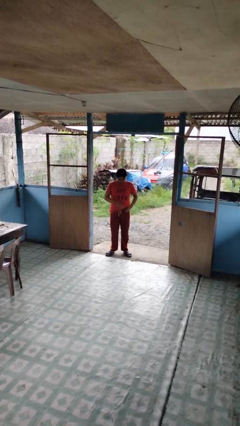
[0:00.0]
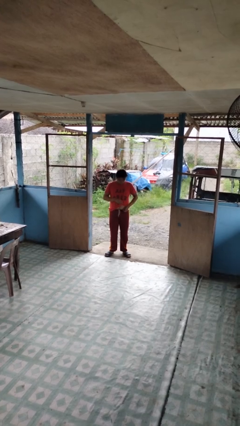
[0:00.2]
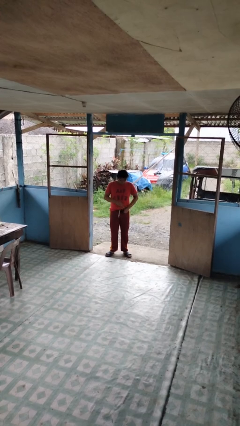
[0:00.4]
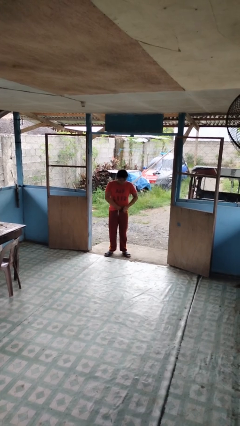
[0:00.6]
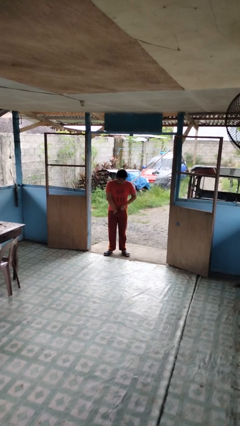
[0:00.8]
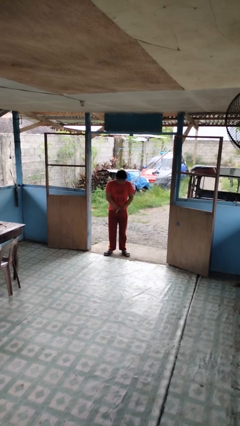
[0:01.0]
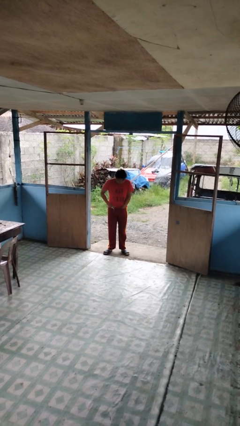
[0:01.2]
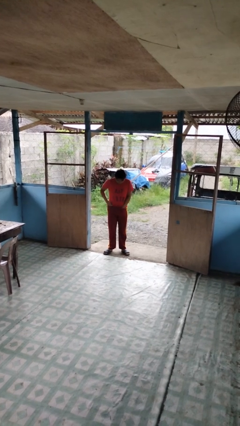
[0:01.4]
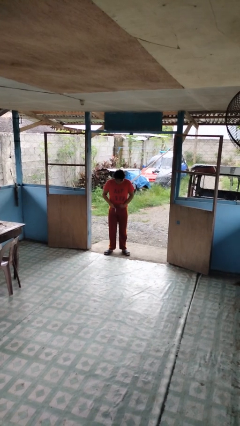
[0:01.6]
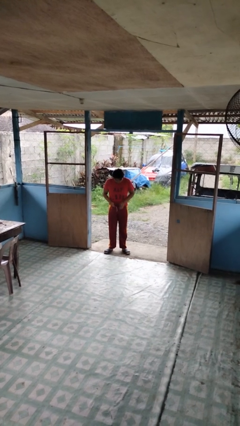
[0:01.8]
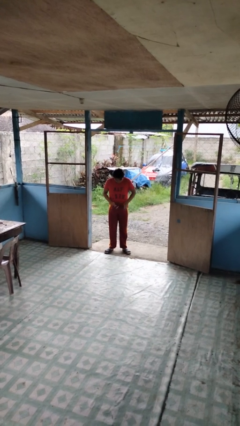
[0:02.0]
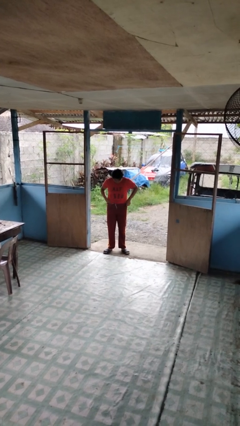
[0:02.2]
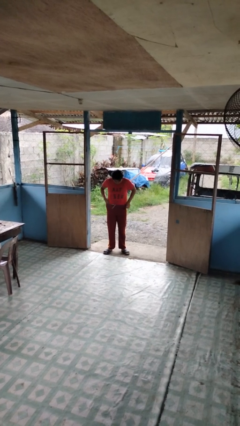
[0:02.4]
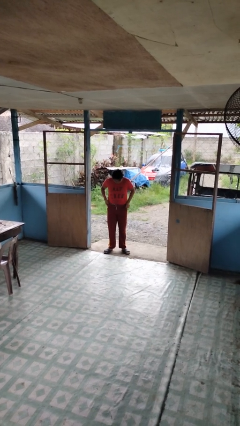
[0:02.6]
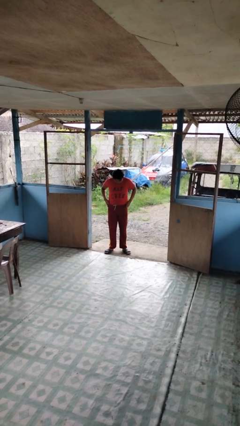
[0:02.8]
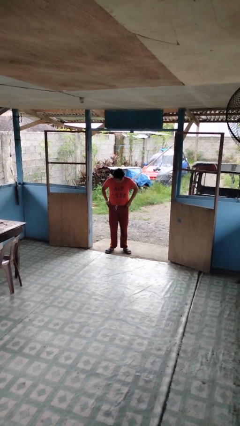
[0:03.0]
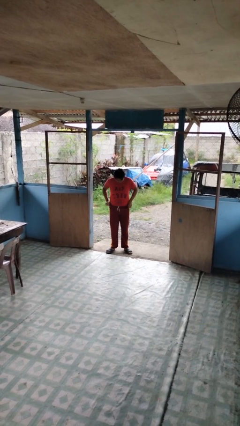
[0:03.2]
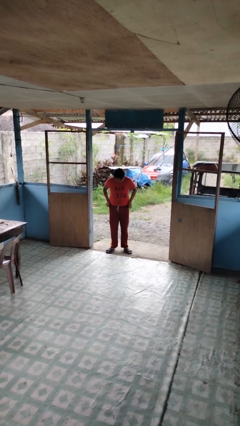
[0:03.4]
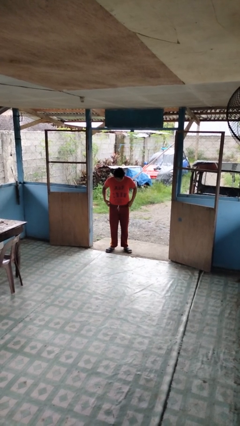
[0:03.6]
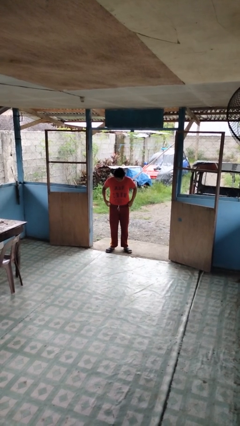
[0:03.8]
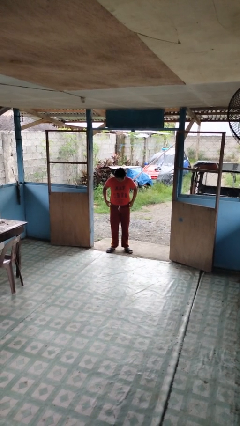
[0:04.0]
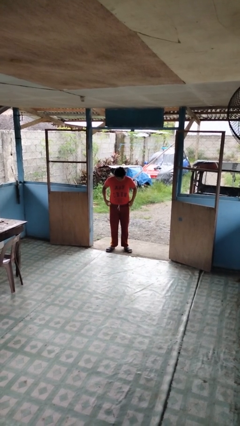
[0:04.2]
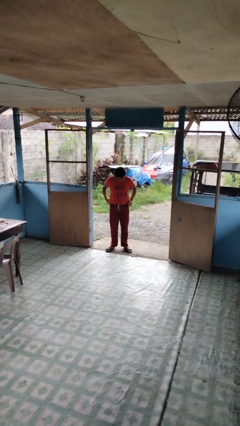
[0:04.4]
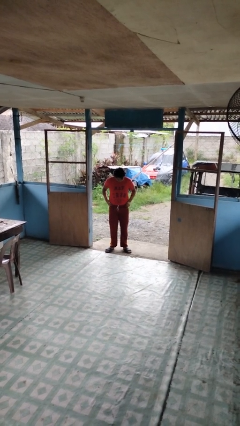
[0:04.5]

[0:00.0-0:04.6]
person tucks in shirt

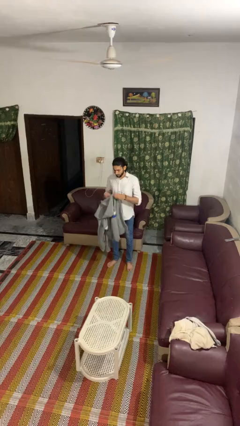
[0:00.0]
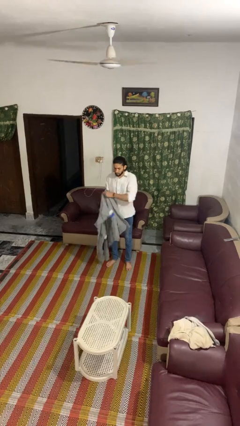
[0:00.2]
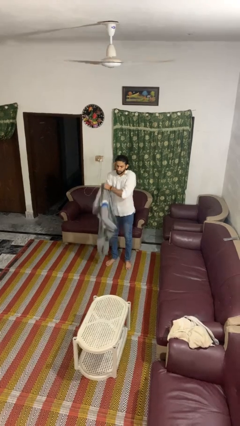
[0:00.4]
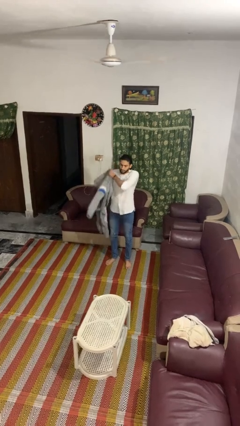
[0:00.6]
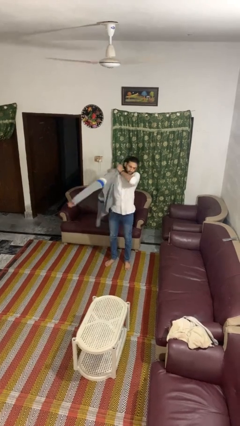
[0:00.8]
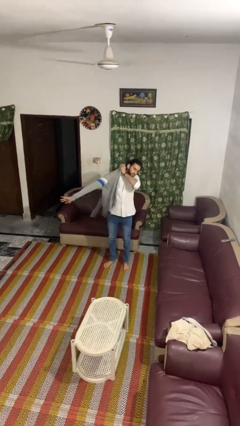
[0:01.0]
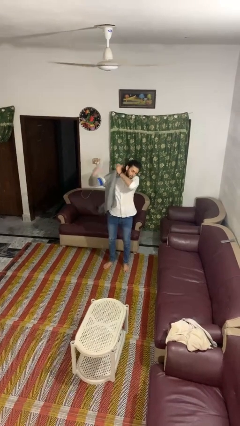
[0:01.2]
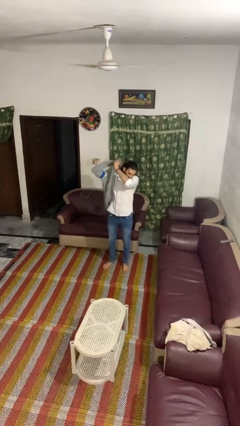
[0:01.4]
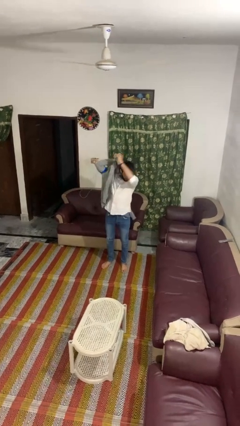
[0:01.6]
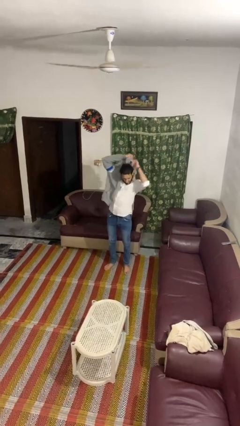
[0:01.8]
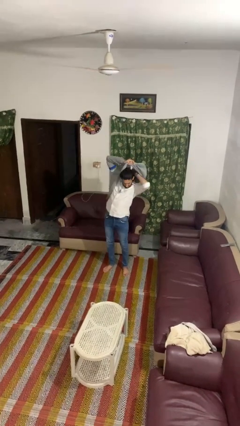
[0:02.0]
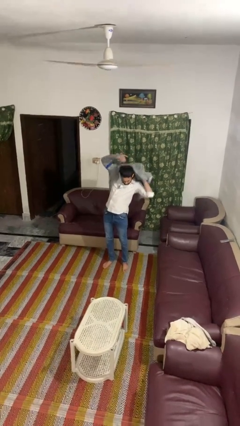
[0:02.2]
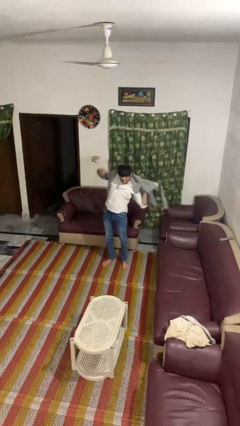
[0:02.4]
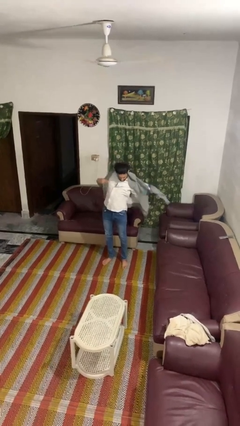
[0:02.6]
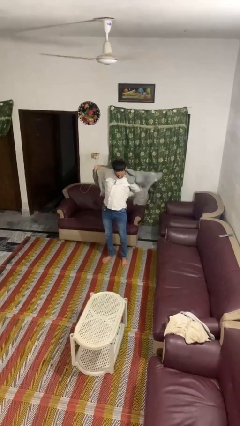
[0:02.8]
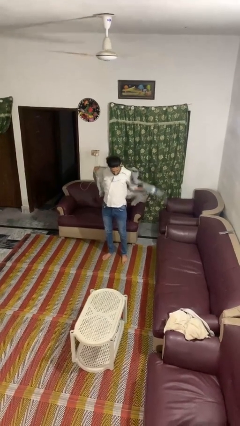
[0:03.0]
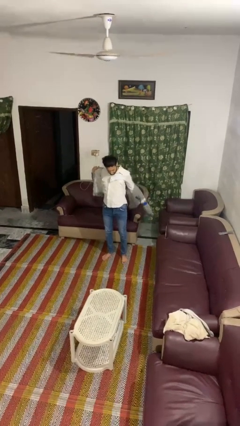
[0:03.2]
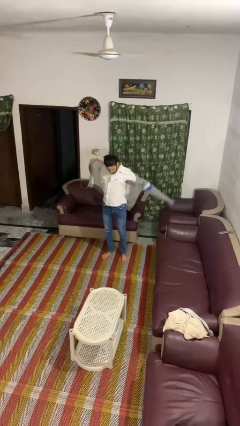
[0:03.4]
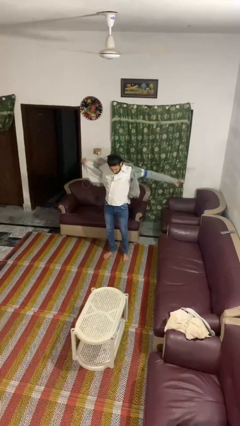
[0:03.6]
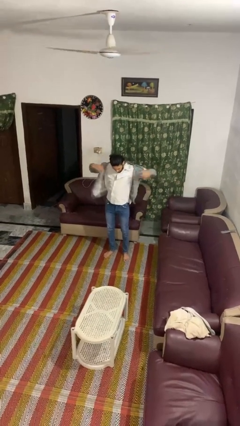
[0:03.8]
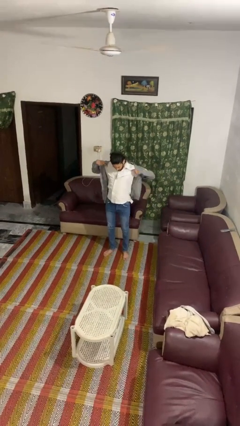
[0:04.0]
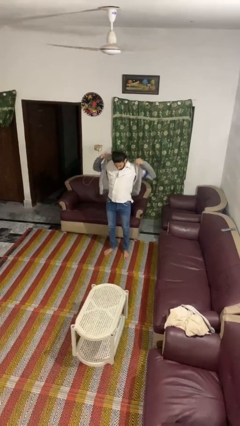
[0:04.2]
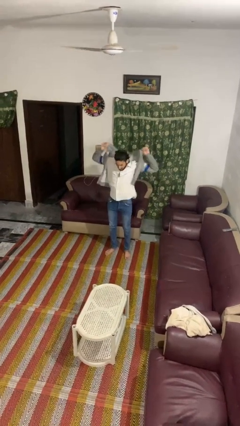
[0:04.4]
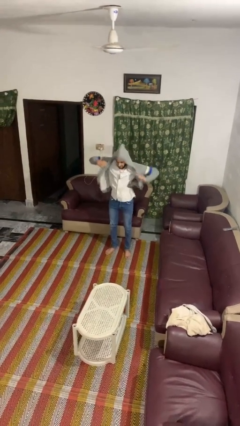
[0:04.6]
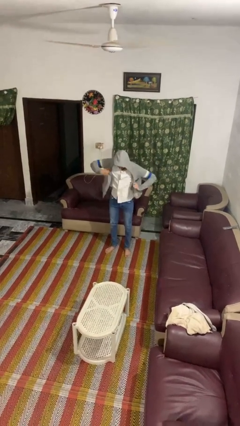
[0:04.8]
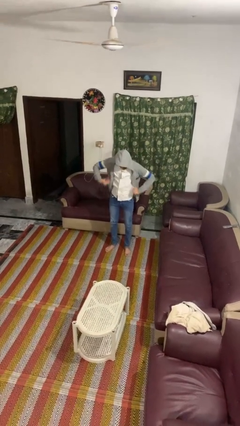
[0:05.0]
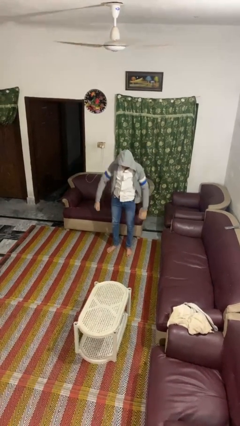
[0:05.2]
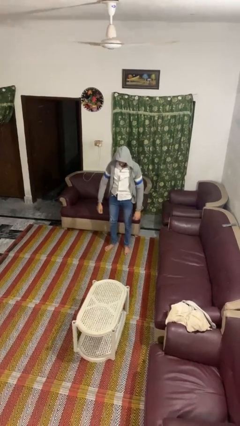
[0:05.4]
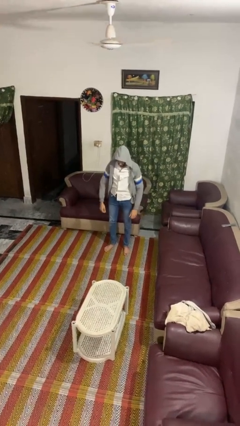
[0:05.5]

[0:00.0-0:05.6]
person puts on hoodie

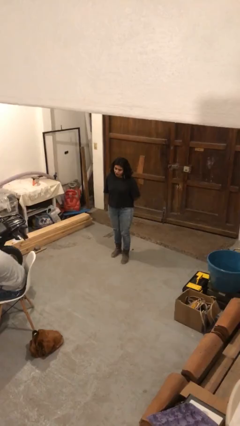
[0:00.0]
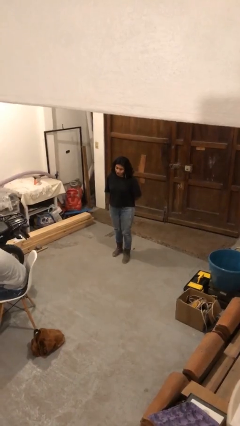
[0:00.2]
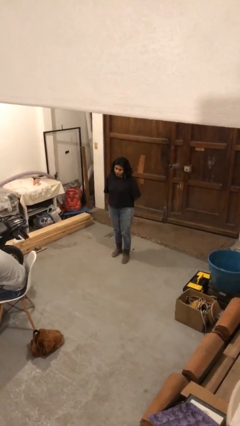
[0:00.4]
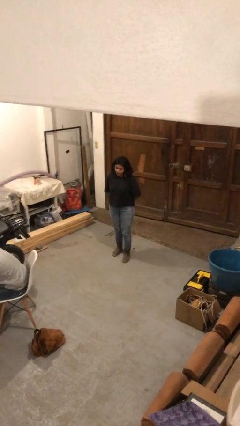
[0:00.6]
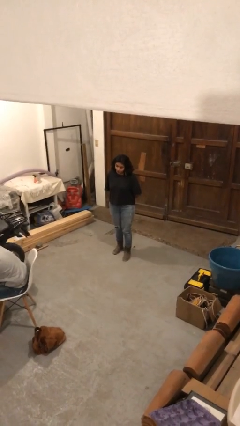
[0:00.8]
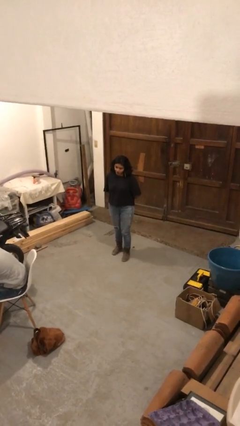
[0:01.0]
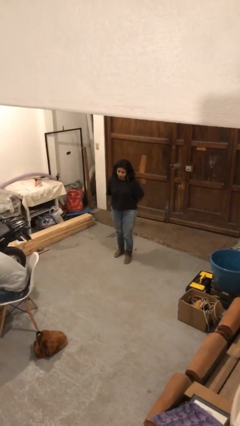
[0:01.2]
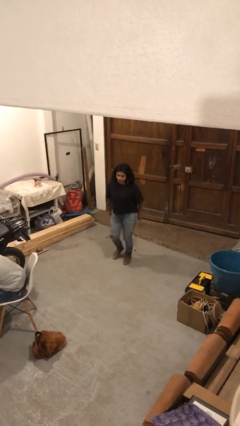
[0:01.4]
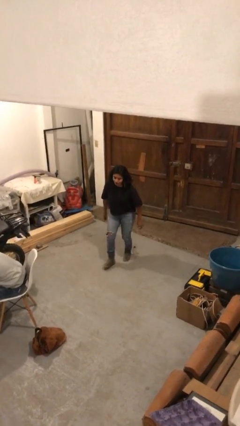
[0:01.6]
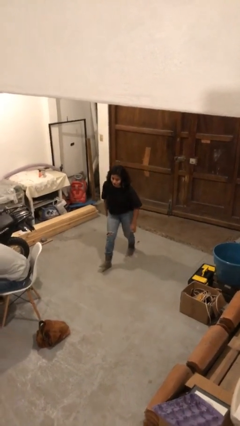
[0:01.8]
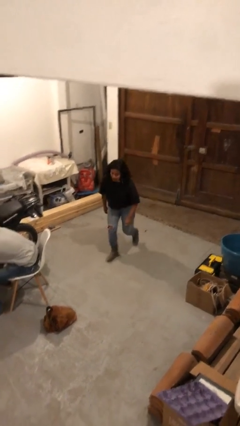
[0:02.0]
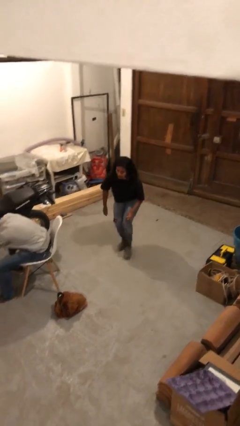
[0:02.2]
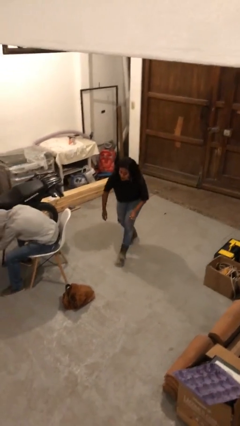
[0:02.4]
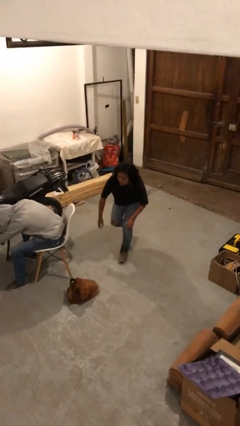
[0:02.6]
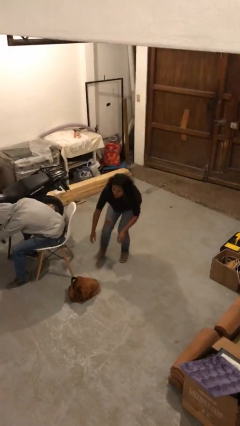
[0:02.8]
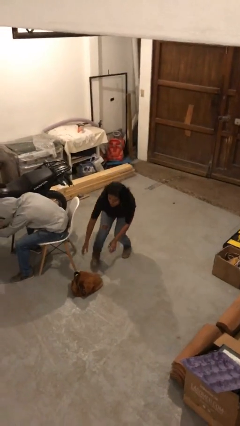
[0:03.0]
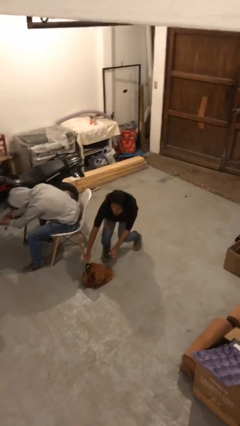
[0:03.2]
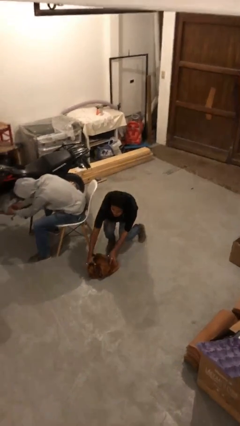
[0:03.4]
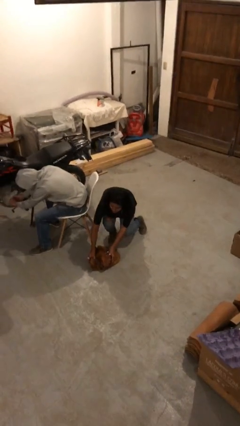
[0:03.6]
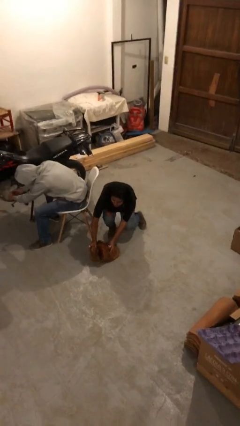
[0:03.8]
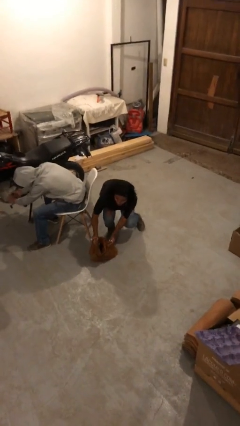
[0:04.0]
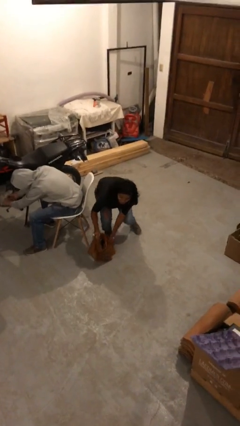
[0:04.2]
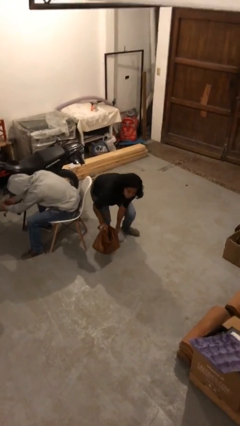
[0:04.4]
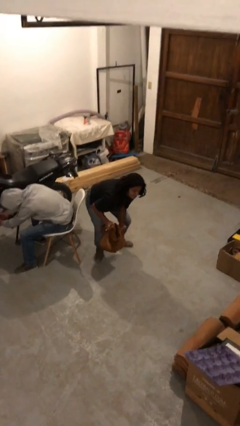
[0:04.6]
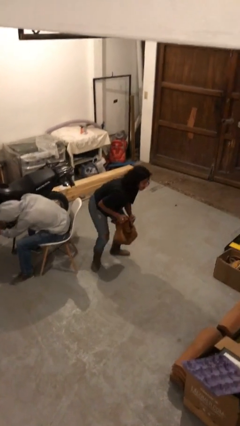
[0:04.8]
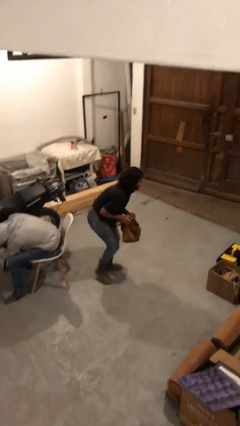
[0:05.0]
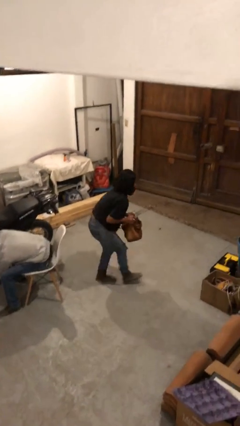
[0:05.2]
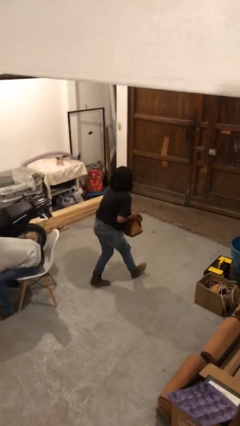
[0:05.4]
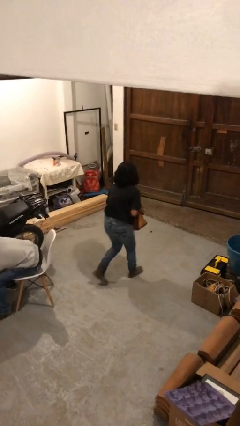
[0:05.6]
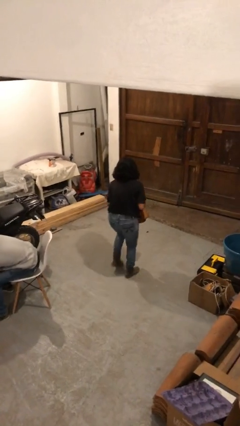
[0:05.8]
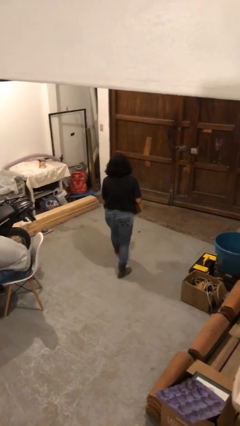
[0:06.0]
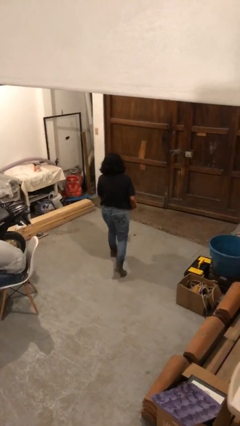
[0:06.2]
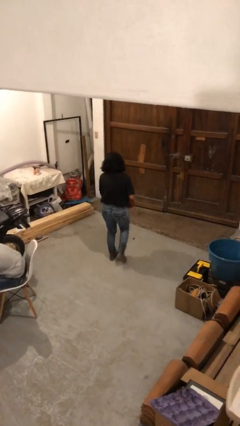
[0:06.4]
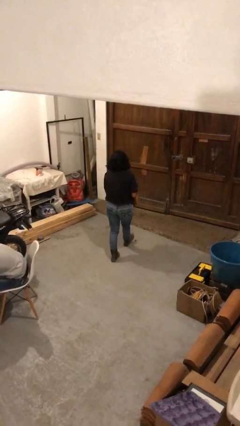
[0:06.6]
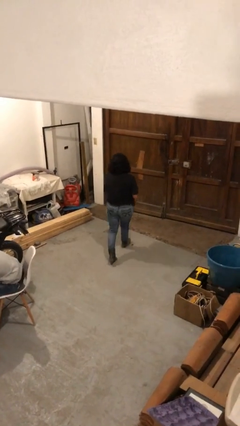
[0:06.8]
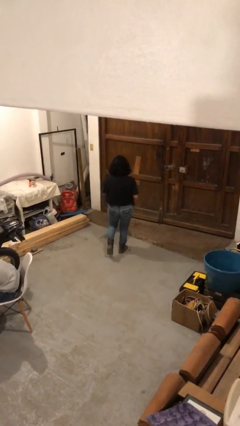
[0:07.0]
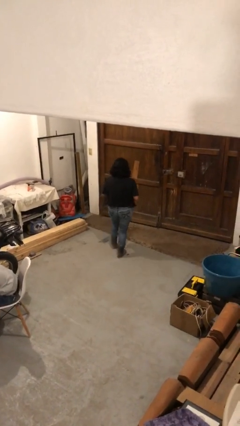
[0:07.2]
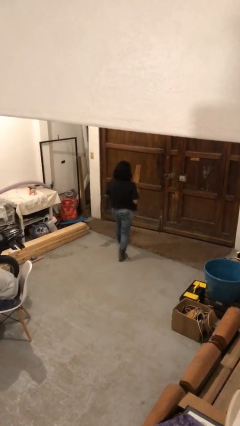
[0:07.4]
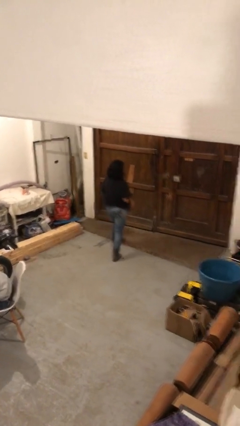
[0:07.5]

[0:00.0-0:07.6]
person steals object from person
